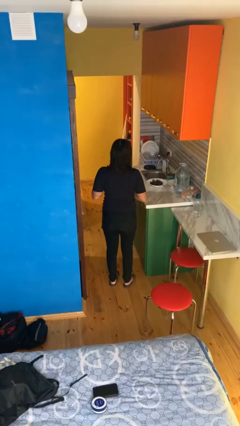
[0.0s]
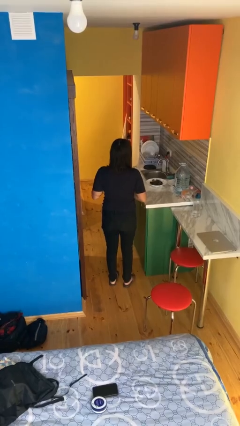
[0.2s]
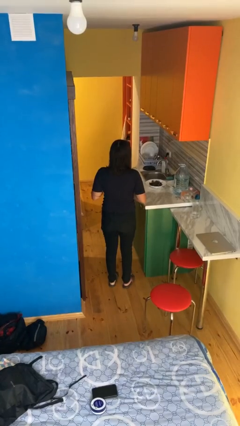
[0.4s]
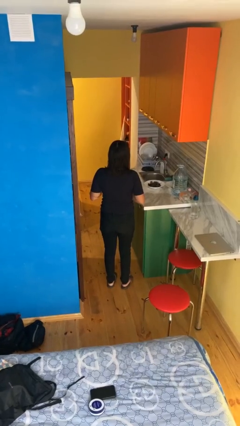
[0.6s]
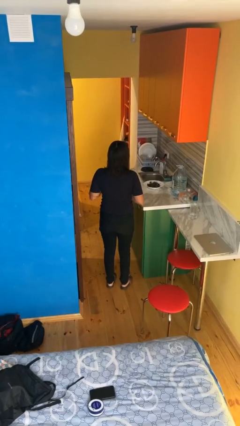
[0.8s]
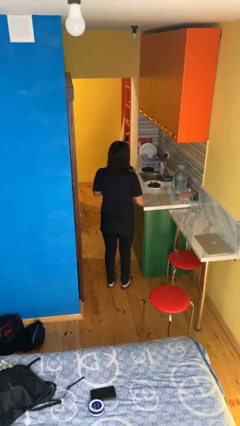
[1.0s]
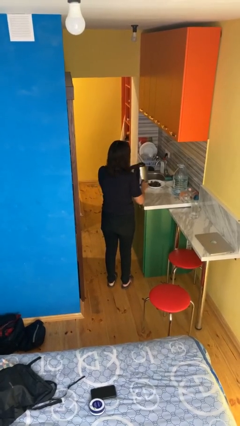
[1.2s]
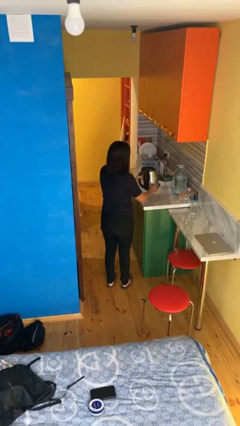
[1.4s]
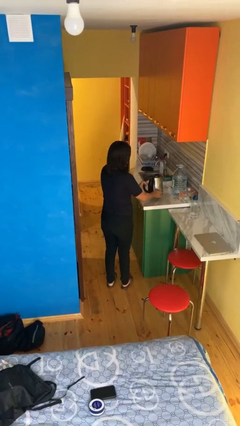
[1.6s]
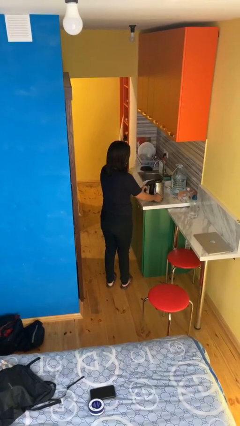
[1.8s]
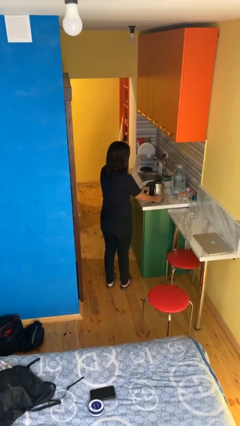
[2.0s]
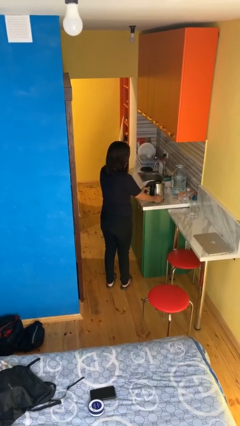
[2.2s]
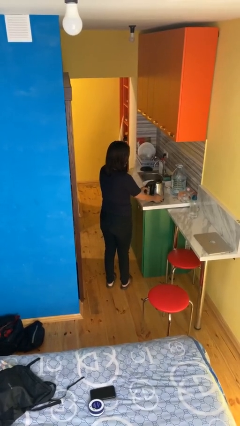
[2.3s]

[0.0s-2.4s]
person puts down object on countertop

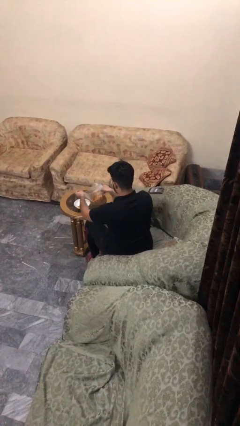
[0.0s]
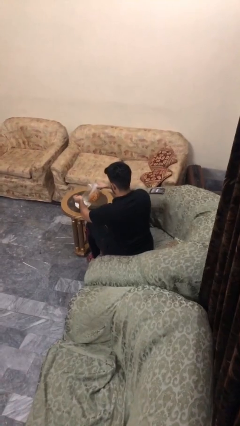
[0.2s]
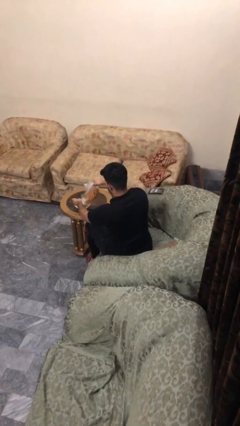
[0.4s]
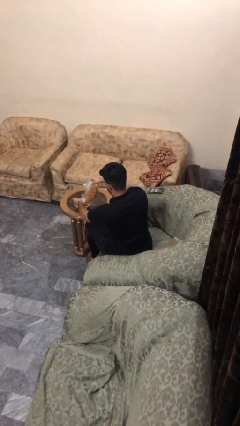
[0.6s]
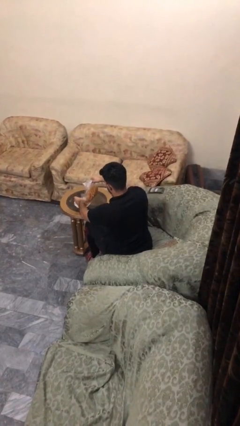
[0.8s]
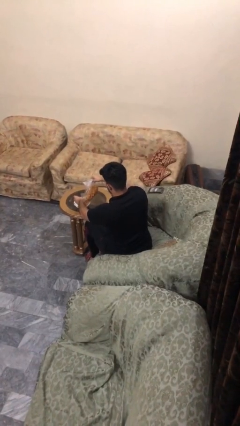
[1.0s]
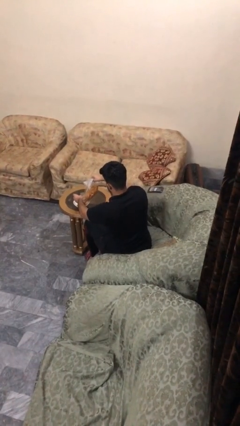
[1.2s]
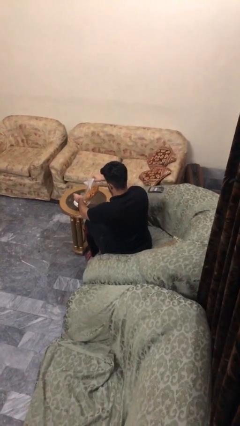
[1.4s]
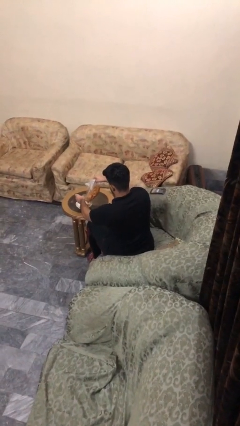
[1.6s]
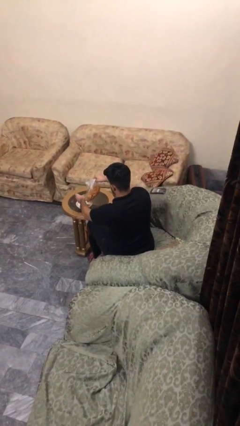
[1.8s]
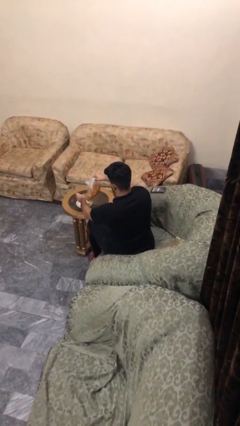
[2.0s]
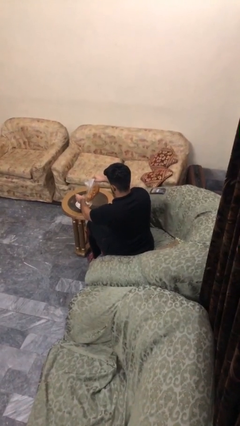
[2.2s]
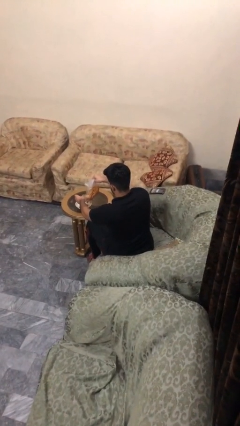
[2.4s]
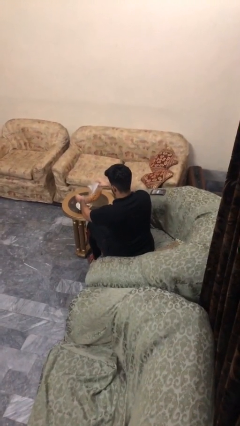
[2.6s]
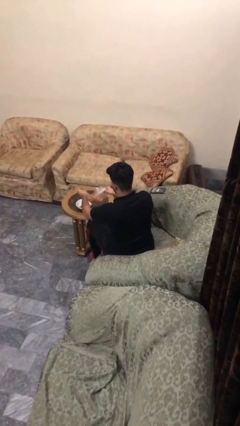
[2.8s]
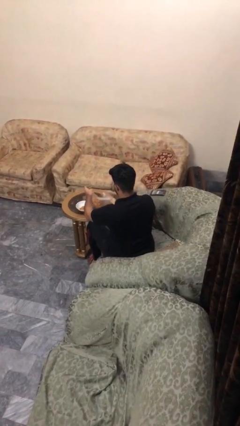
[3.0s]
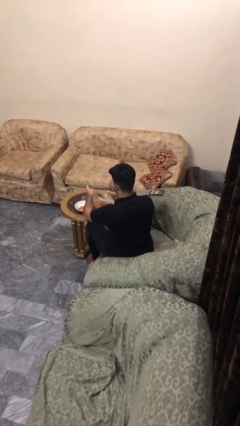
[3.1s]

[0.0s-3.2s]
person pours into bowl

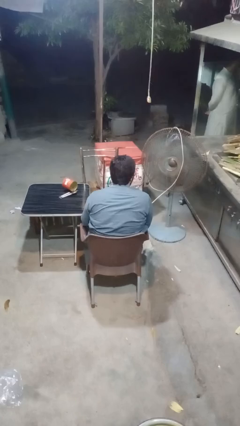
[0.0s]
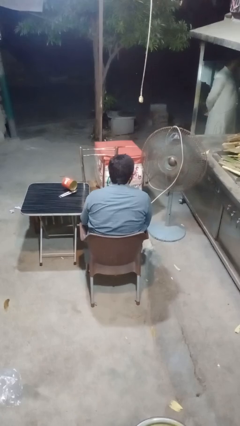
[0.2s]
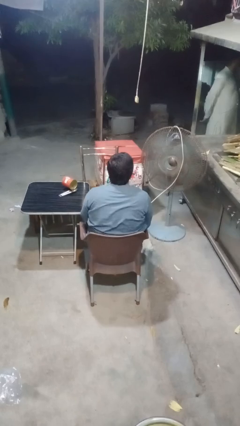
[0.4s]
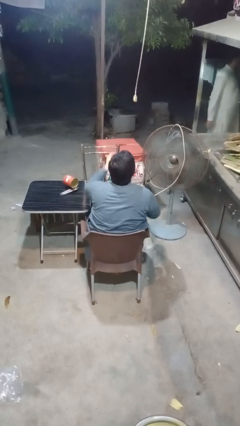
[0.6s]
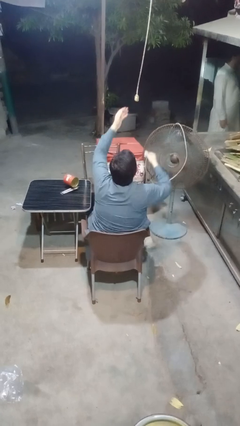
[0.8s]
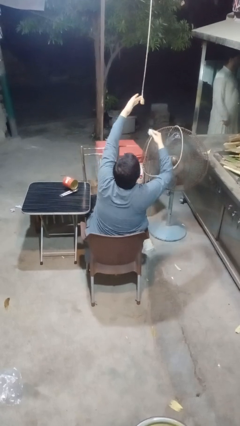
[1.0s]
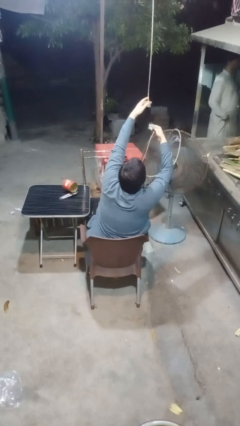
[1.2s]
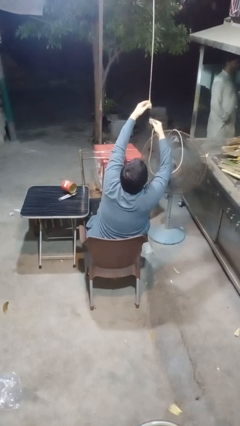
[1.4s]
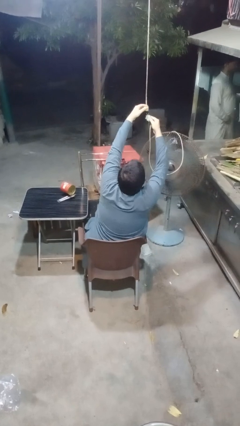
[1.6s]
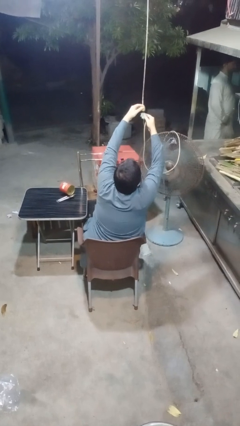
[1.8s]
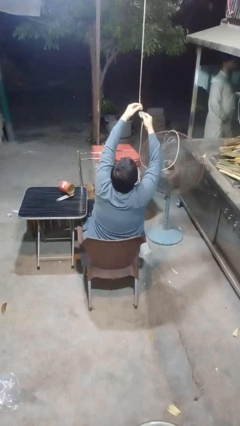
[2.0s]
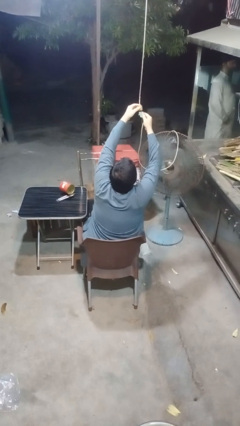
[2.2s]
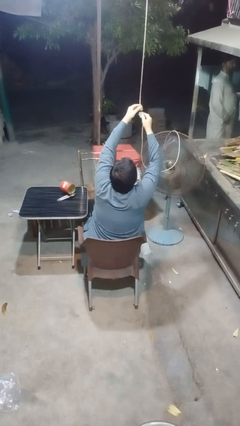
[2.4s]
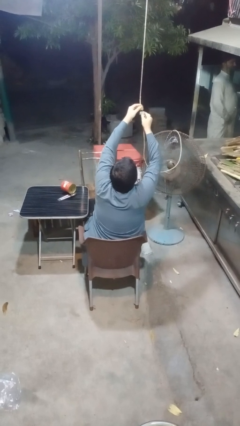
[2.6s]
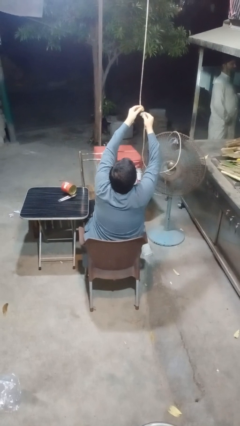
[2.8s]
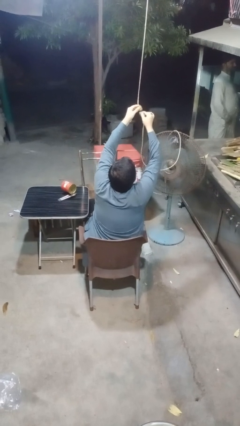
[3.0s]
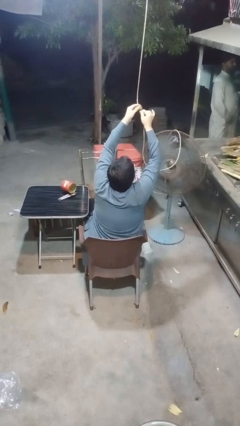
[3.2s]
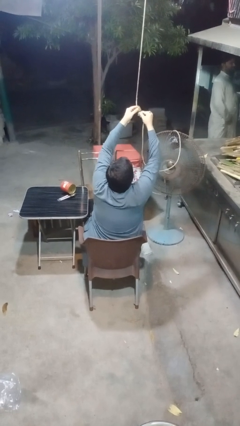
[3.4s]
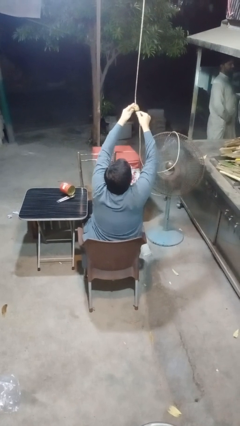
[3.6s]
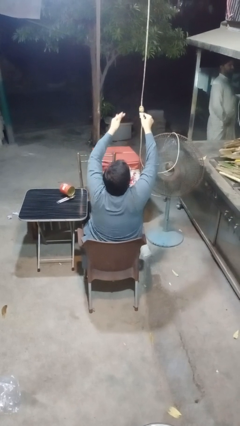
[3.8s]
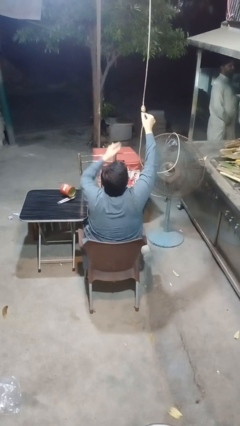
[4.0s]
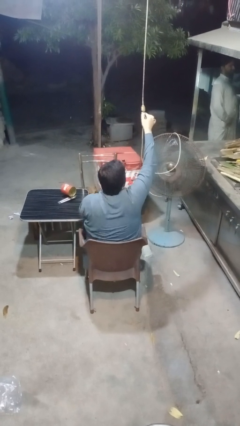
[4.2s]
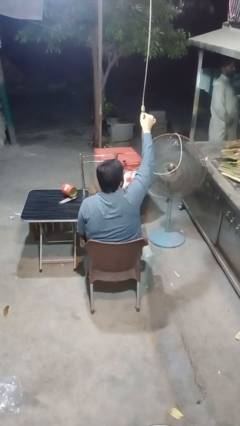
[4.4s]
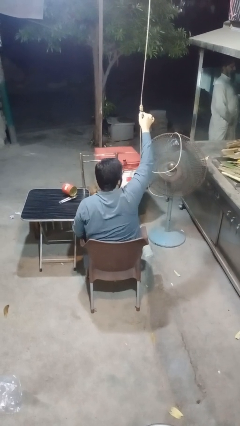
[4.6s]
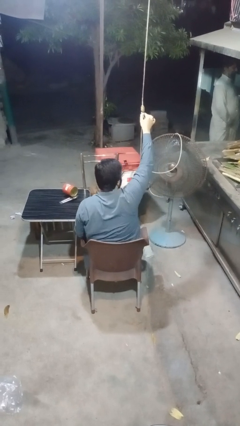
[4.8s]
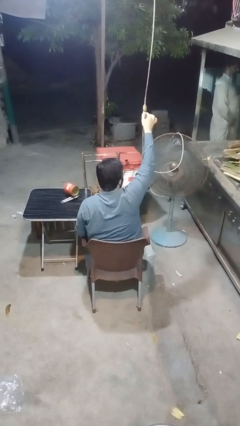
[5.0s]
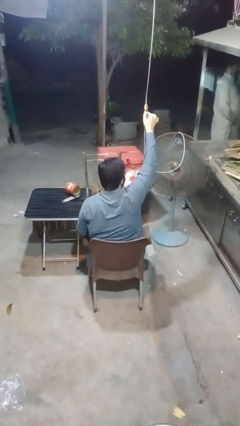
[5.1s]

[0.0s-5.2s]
person turns on fan

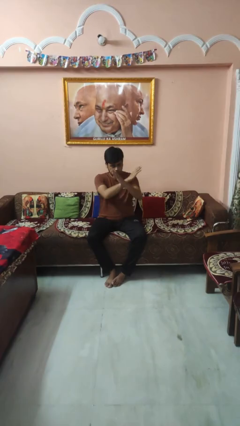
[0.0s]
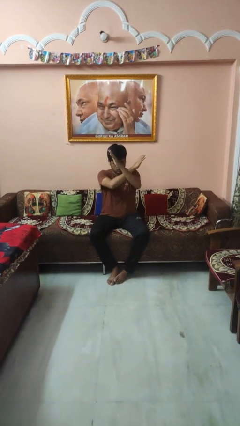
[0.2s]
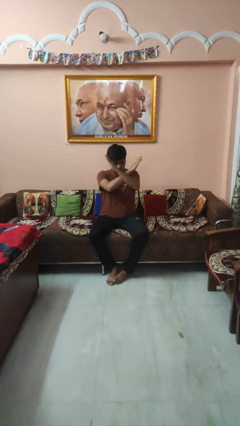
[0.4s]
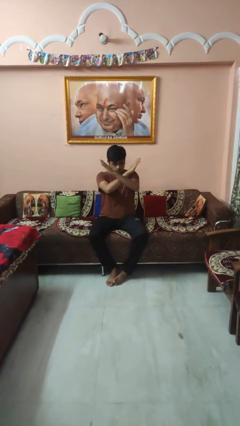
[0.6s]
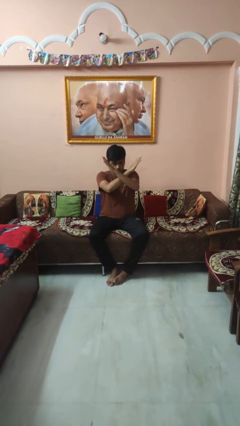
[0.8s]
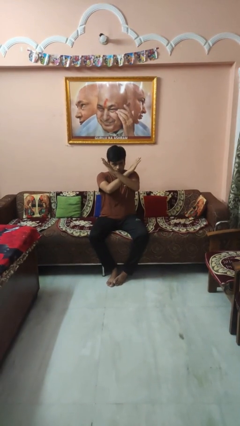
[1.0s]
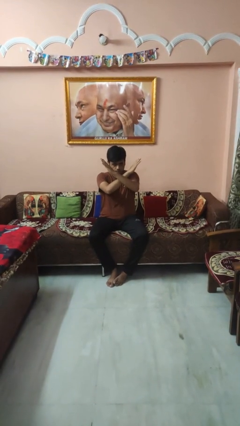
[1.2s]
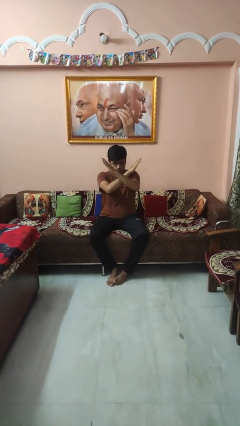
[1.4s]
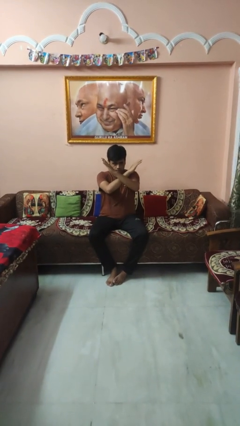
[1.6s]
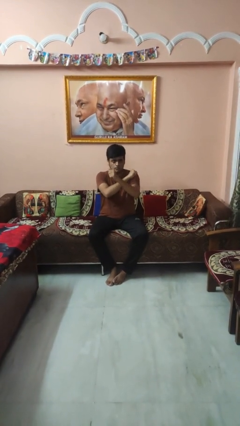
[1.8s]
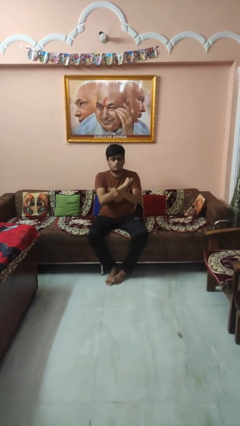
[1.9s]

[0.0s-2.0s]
person gestures arms x

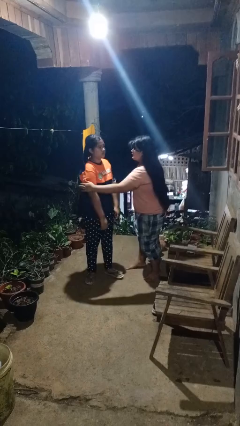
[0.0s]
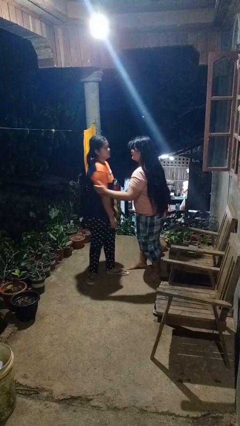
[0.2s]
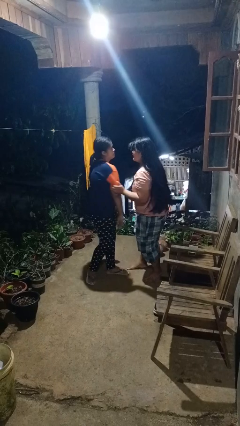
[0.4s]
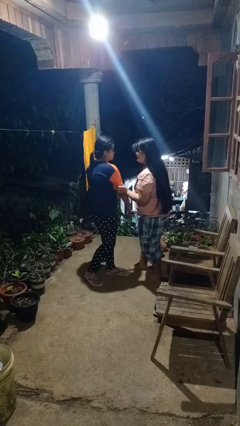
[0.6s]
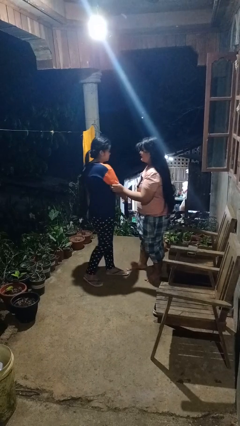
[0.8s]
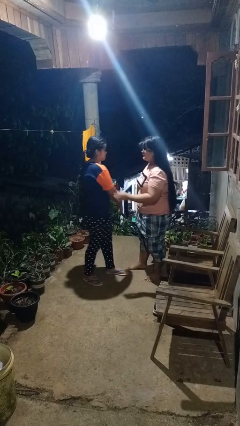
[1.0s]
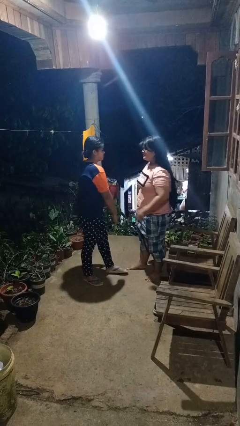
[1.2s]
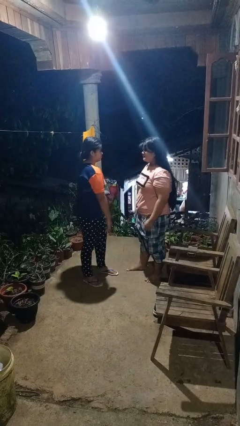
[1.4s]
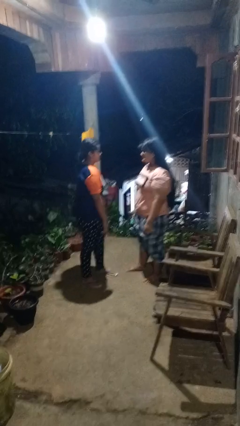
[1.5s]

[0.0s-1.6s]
person grabs person by bicep

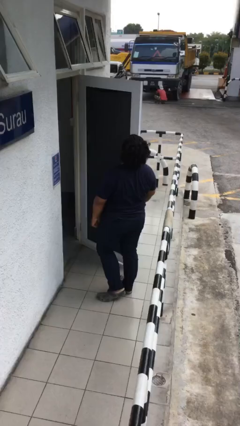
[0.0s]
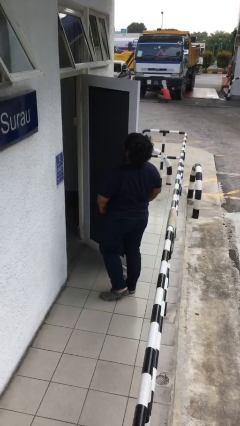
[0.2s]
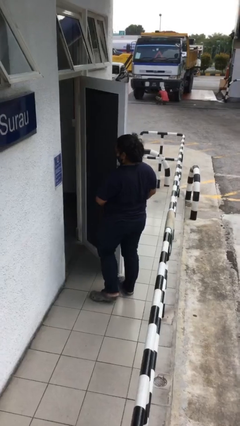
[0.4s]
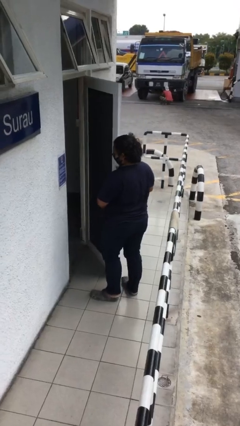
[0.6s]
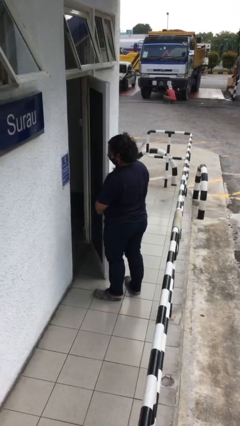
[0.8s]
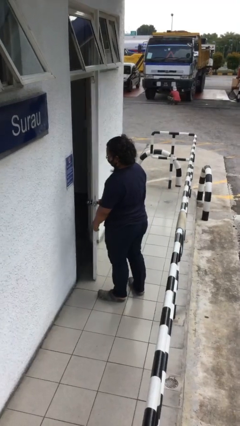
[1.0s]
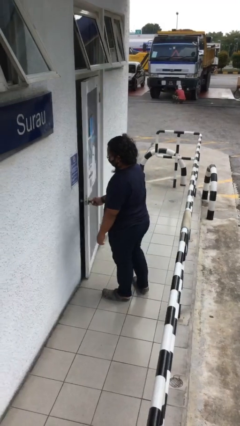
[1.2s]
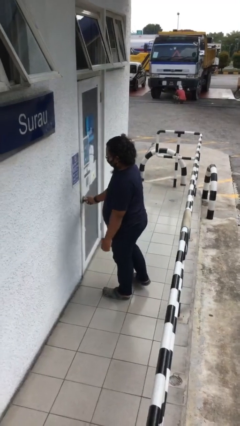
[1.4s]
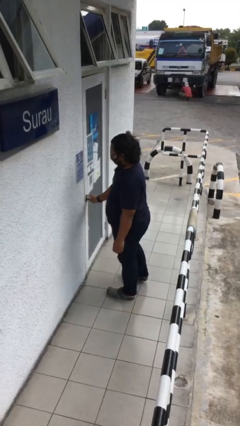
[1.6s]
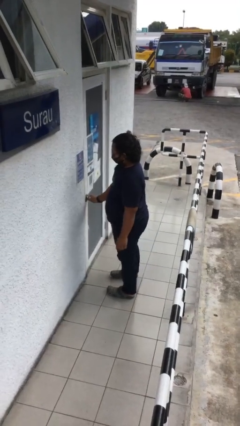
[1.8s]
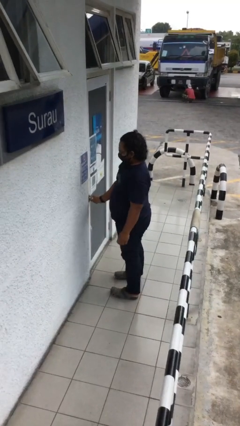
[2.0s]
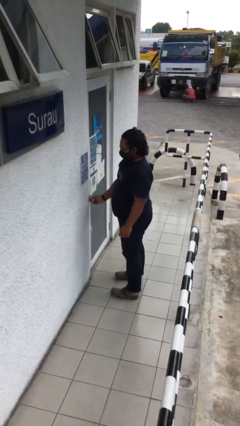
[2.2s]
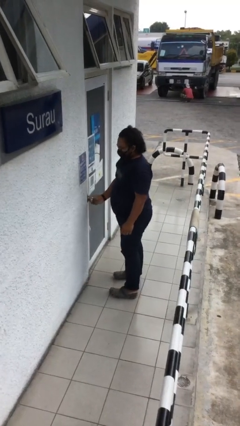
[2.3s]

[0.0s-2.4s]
person closes facility door

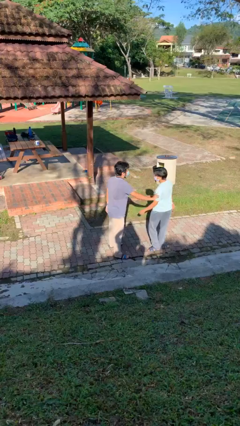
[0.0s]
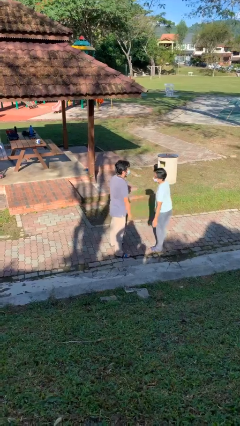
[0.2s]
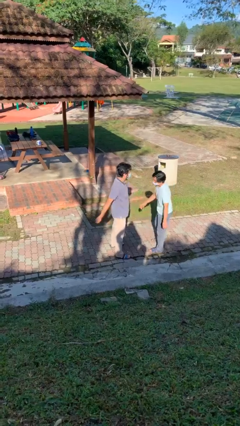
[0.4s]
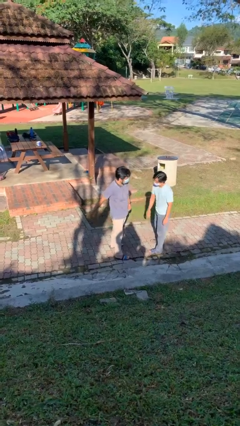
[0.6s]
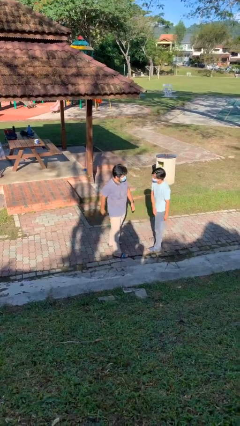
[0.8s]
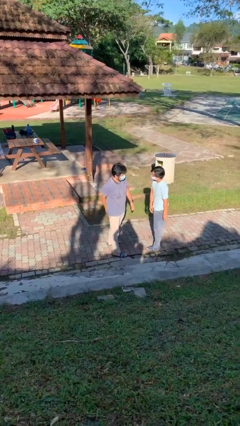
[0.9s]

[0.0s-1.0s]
person spins person around
